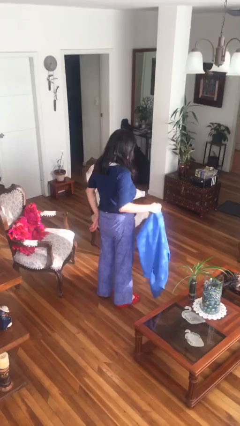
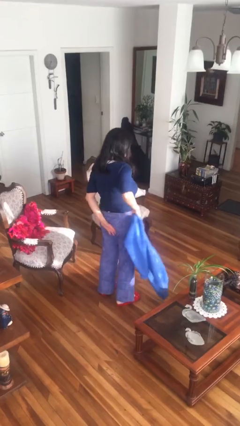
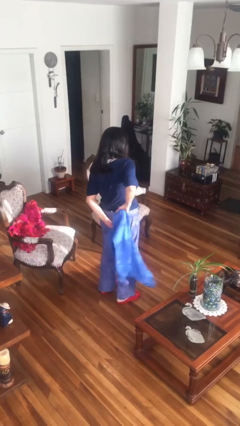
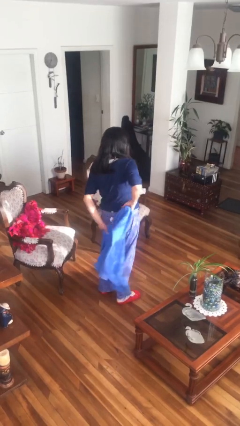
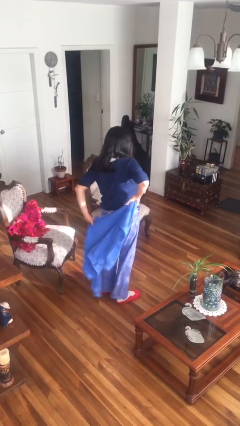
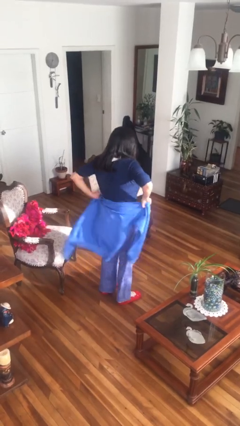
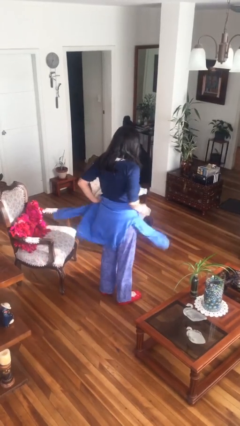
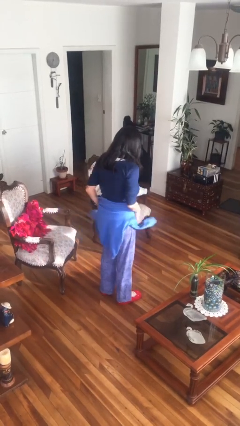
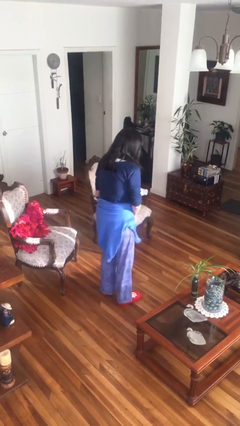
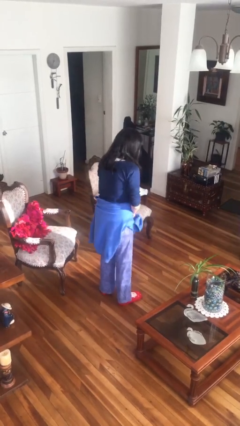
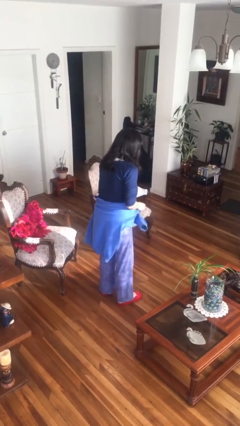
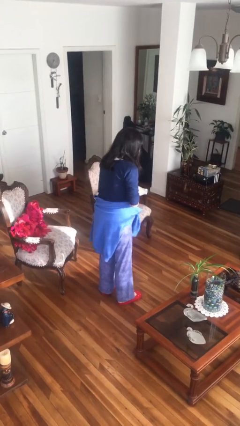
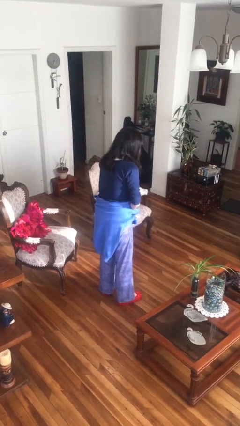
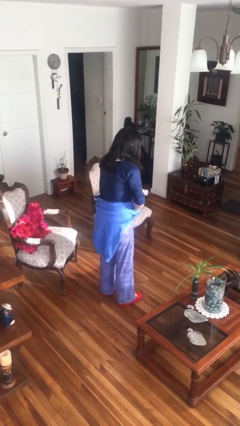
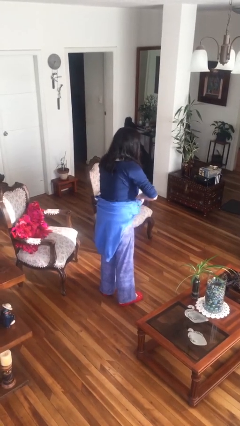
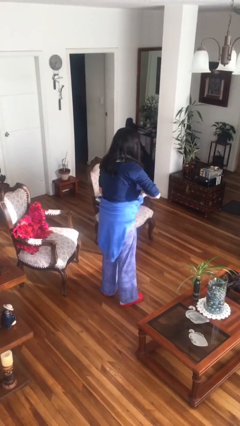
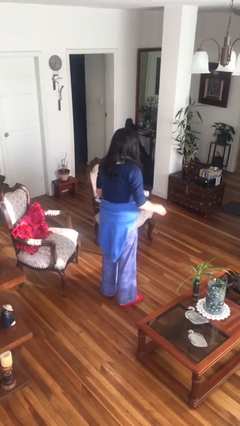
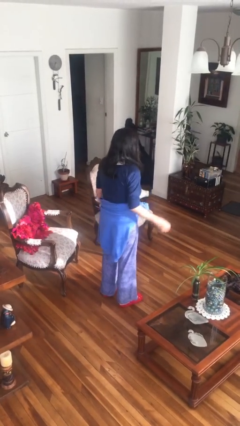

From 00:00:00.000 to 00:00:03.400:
person ties jacket around waist

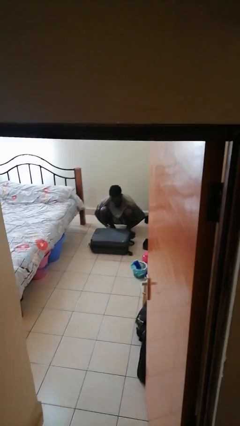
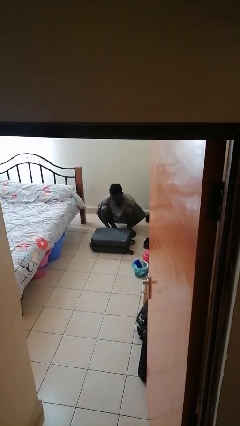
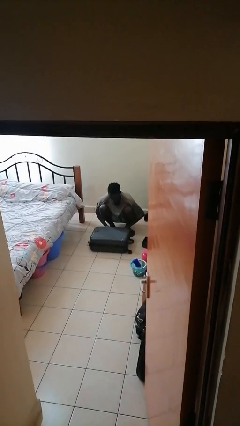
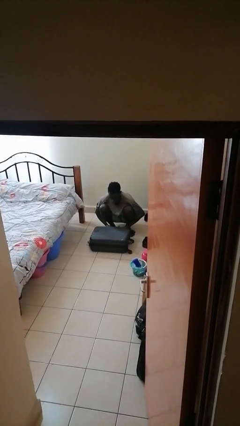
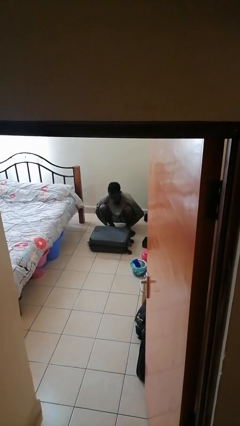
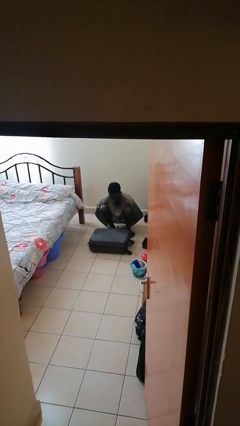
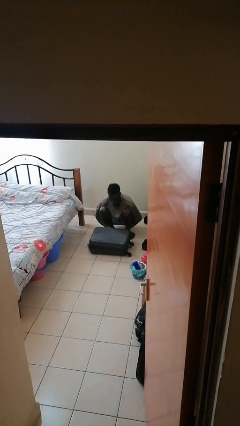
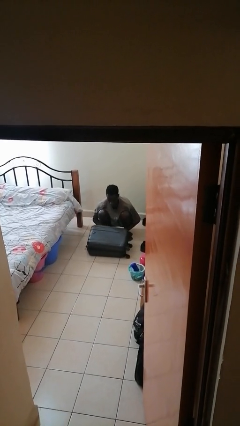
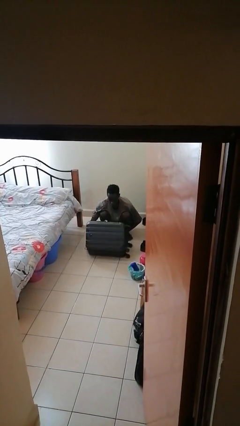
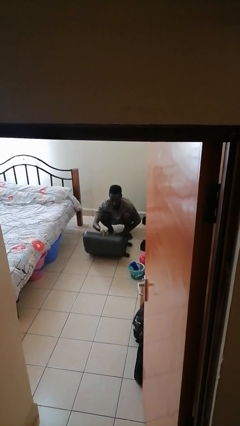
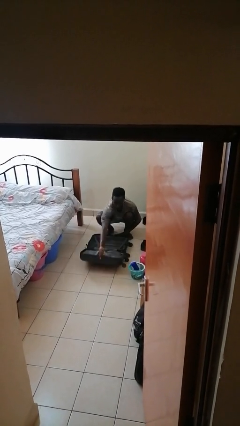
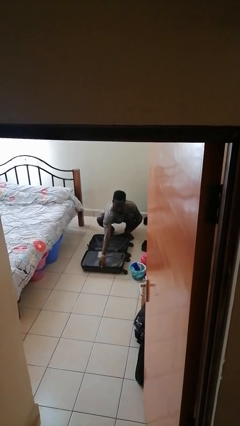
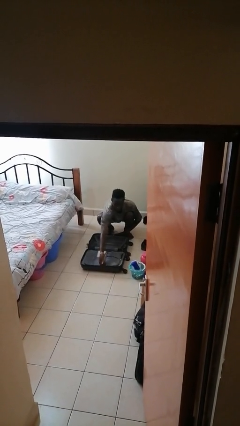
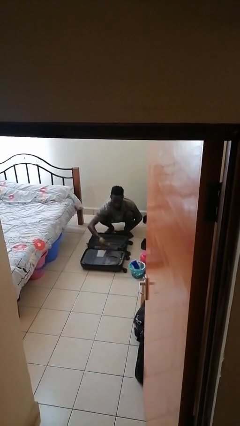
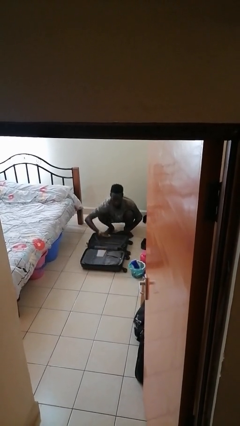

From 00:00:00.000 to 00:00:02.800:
person opens suitcase

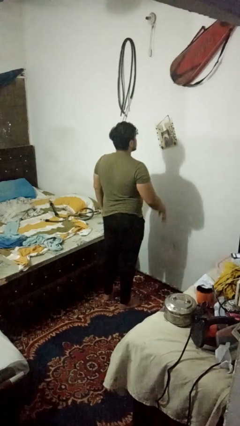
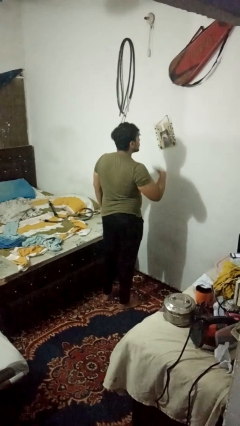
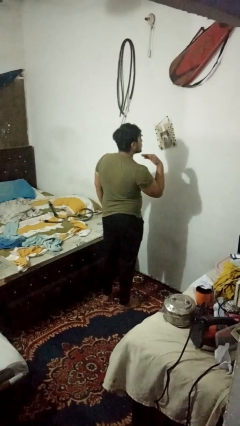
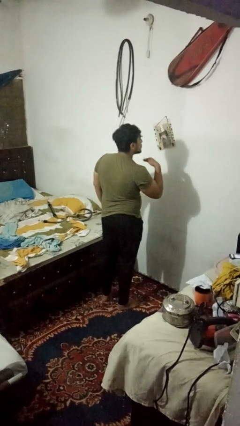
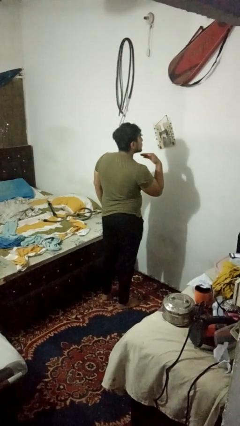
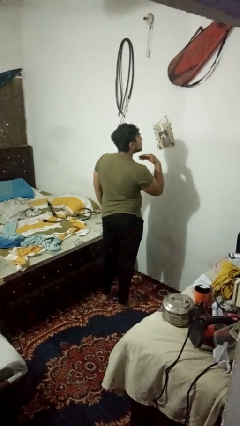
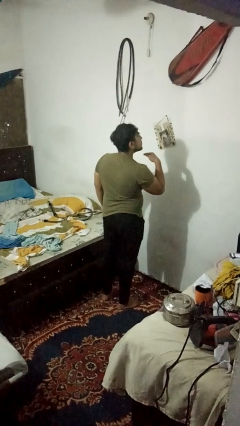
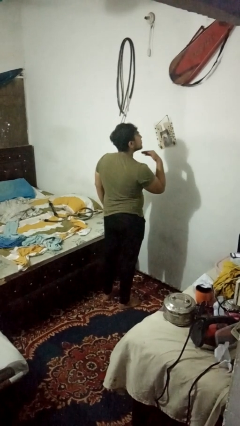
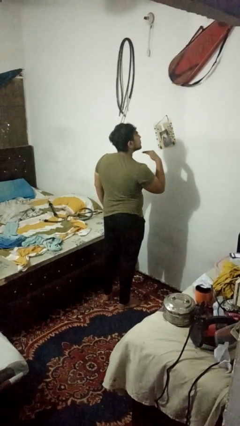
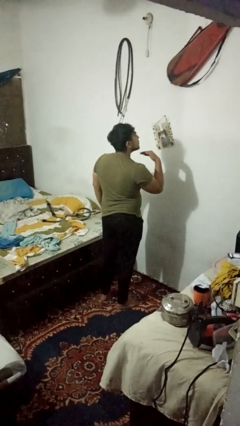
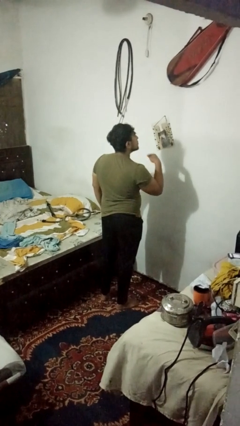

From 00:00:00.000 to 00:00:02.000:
person gestures cut

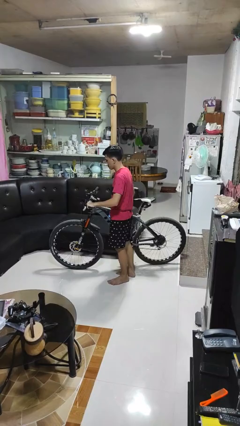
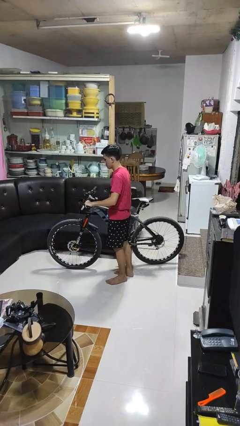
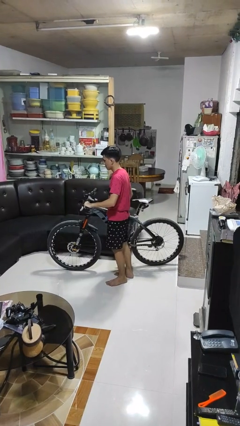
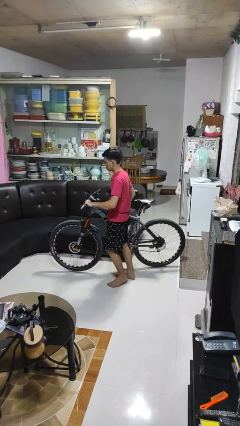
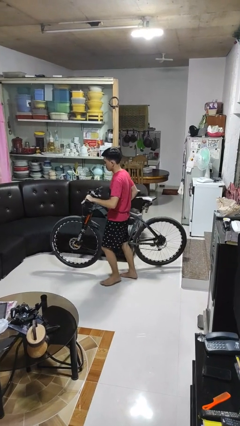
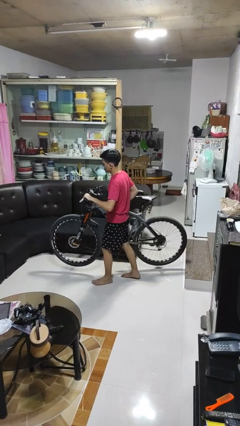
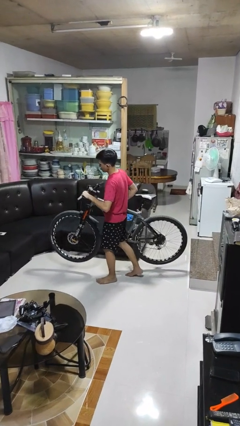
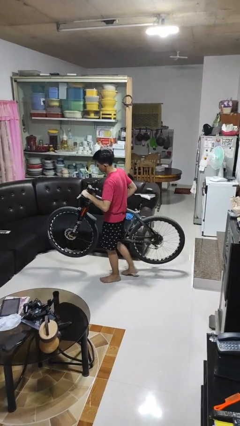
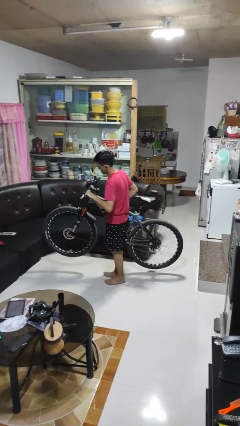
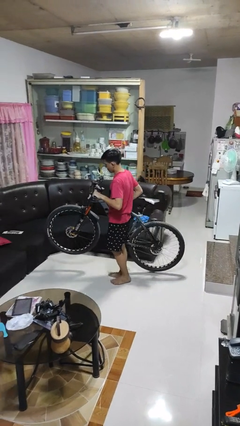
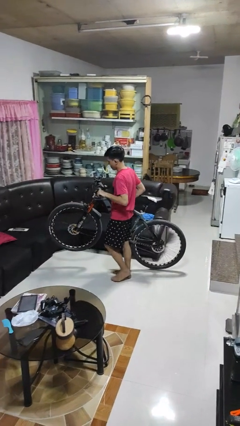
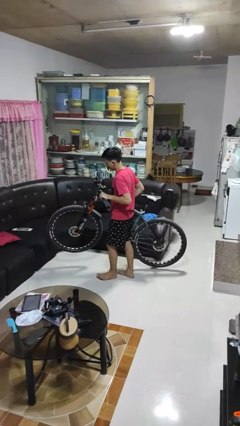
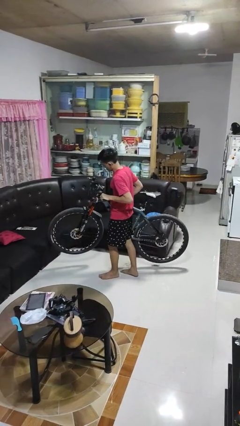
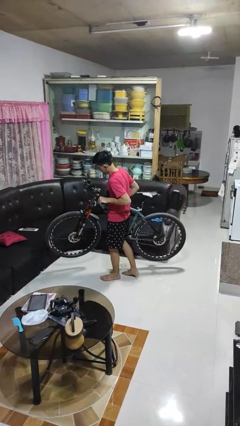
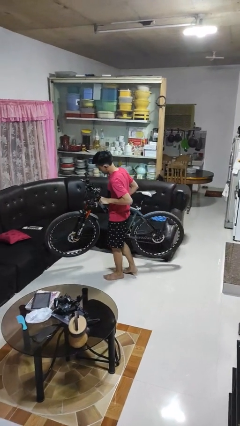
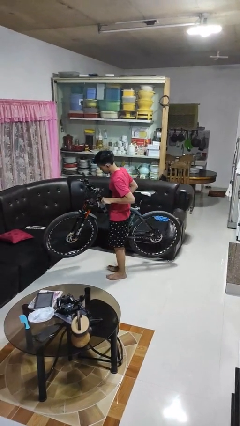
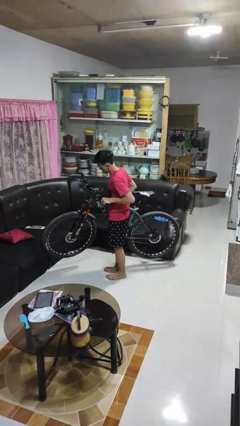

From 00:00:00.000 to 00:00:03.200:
person carries bicycle

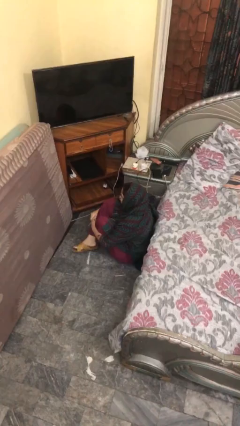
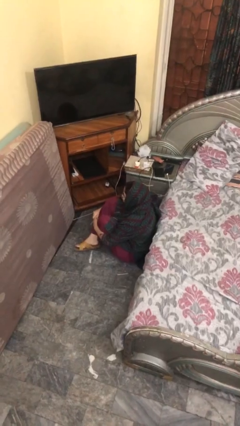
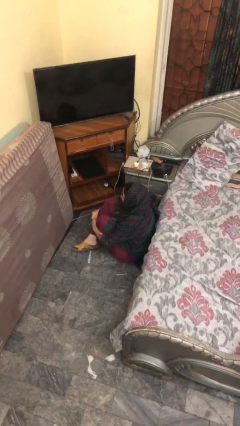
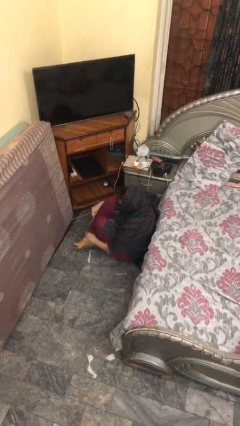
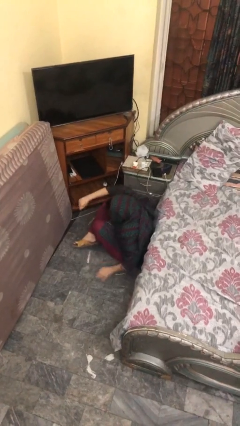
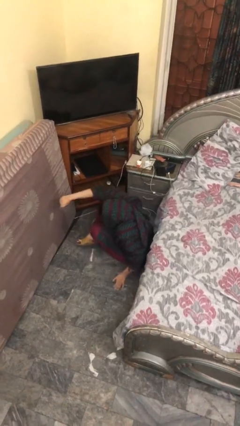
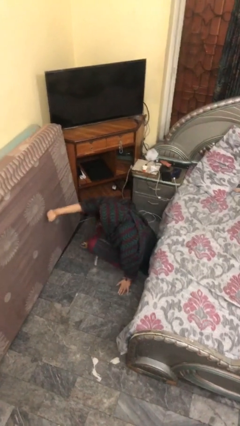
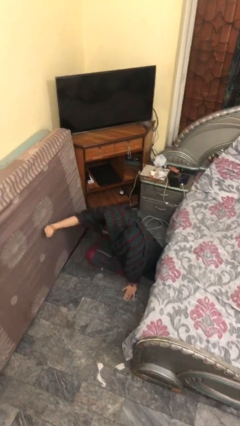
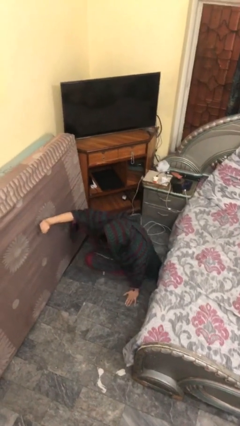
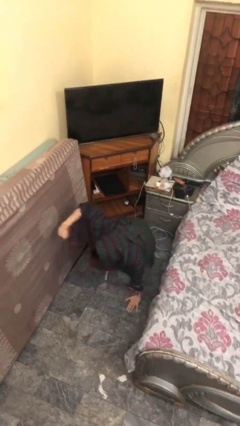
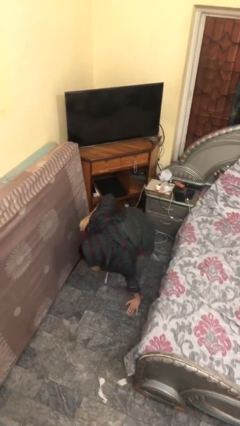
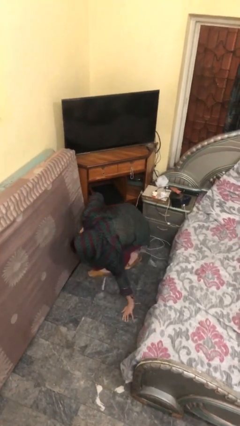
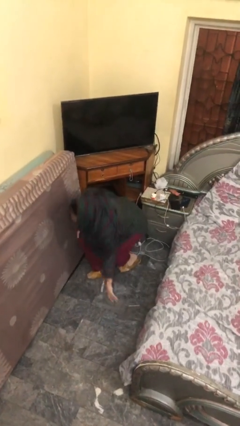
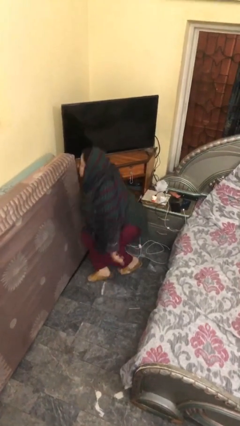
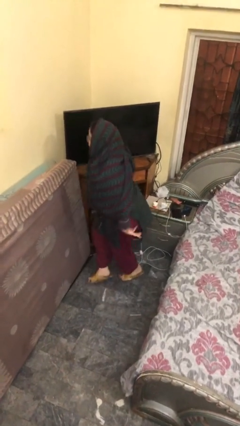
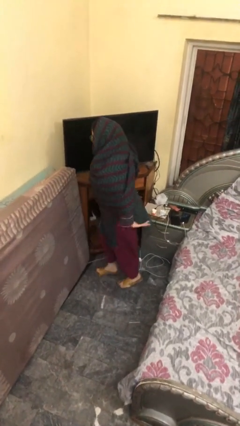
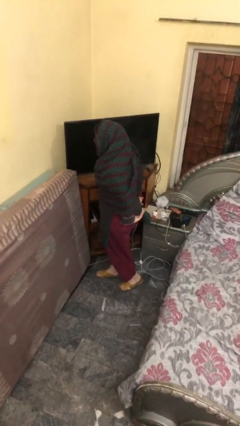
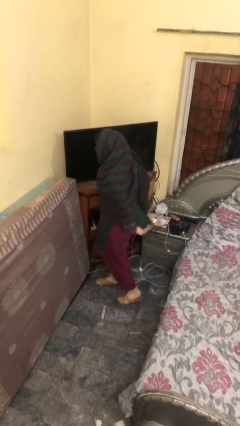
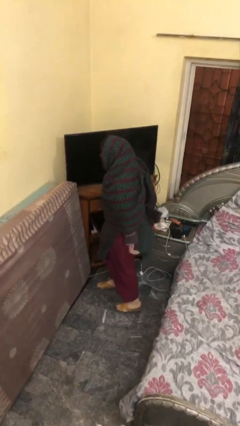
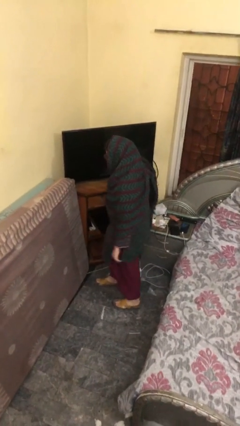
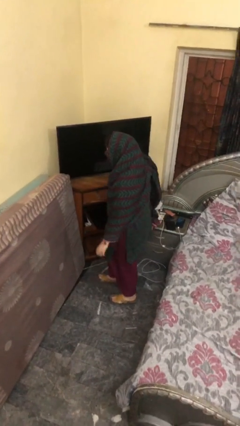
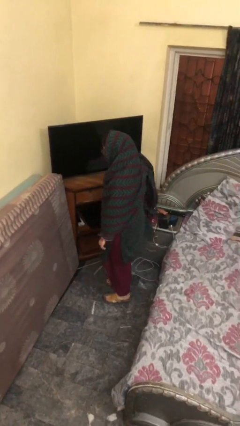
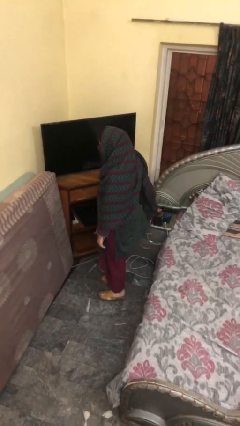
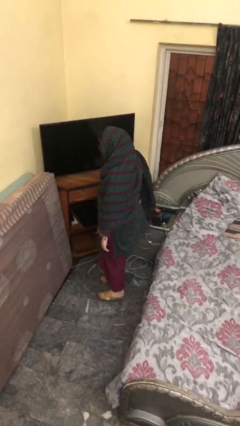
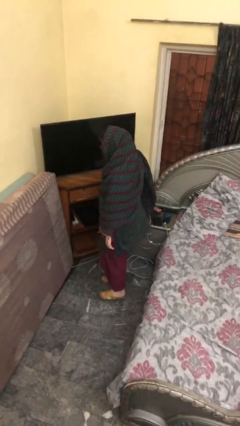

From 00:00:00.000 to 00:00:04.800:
person stands up from floor

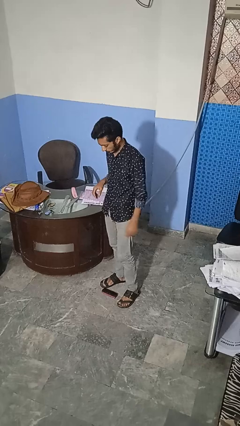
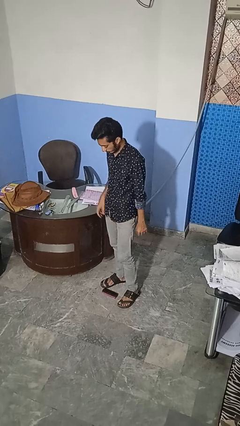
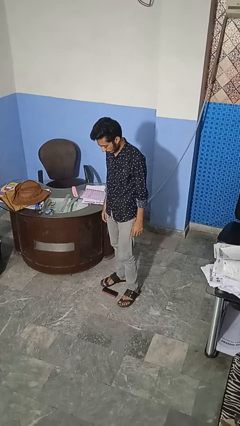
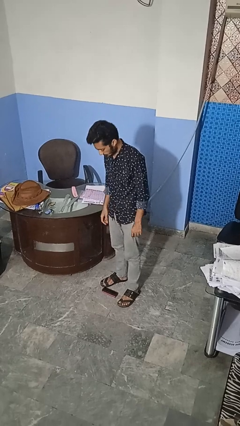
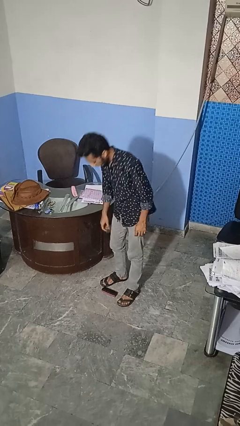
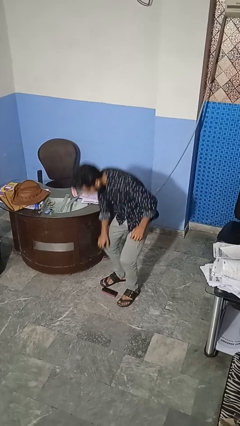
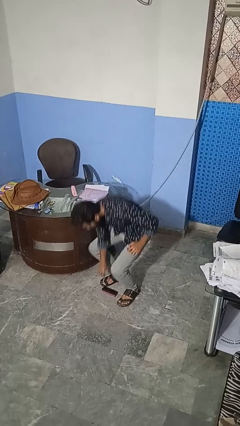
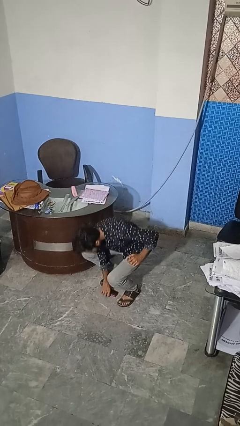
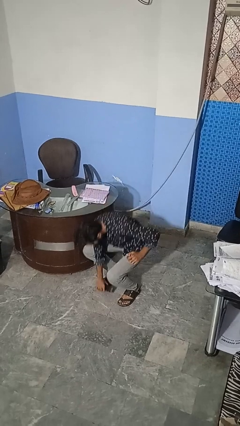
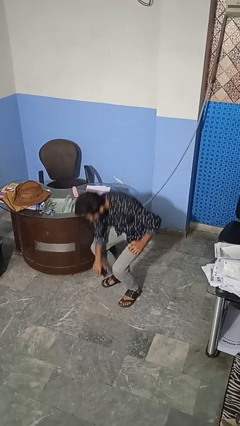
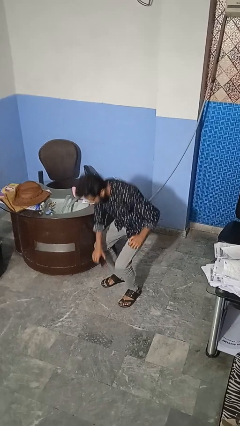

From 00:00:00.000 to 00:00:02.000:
person picks up object from floor
